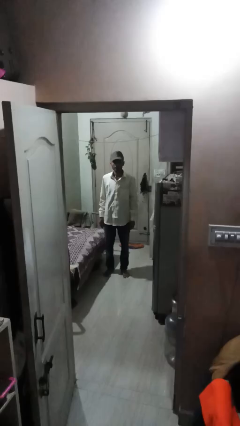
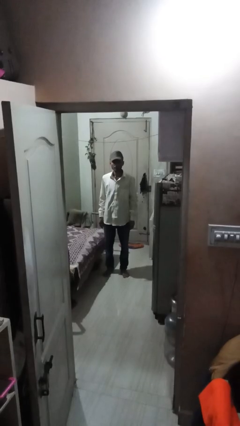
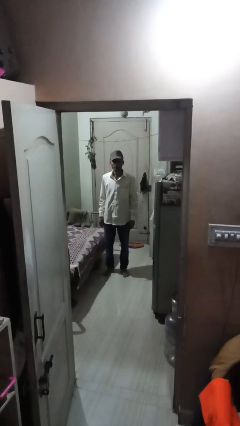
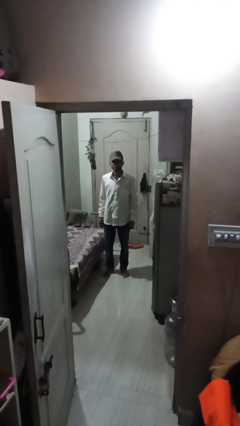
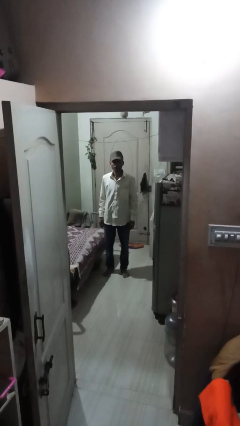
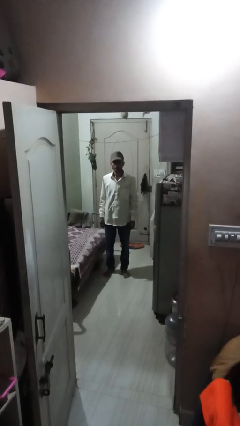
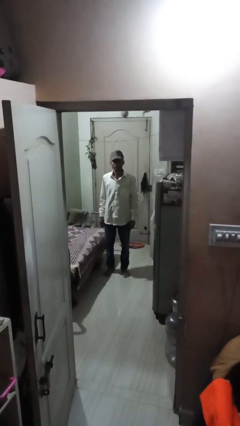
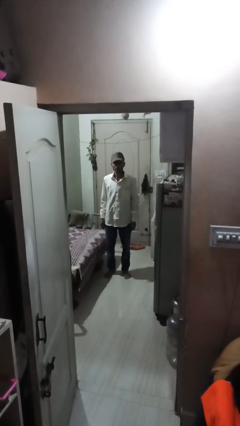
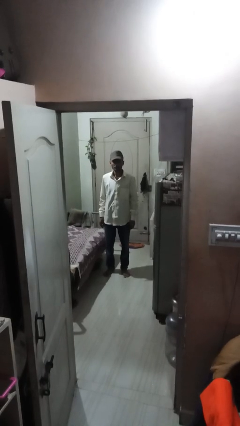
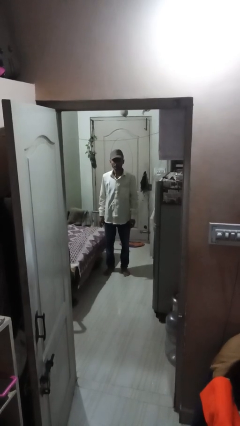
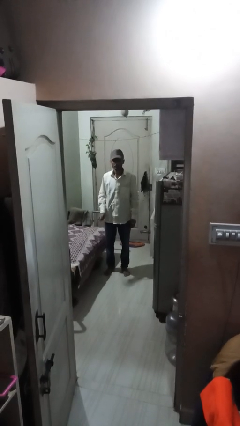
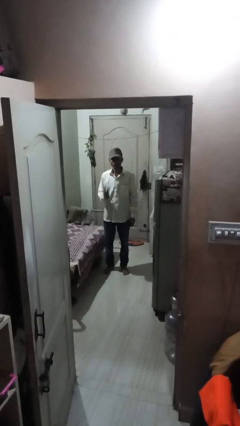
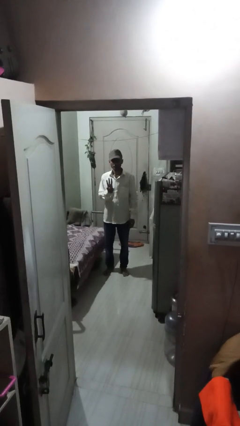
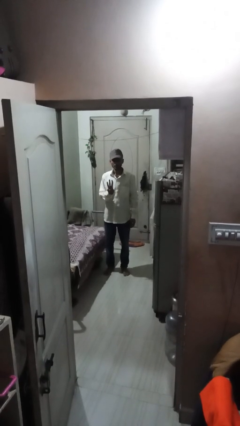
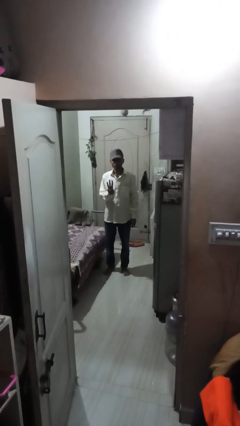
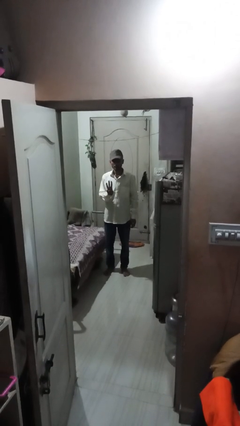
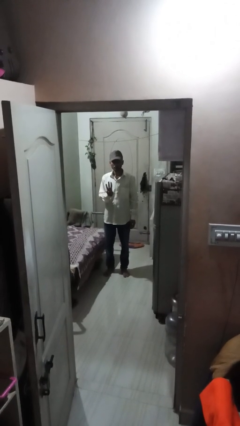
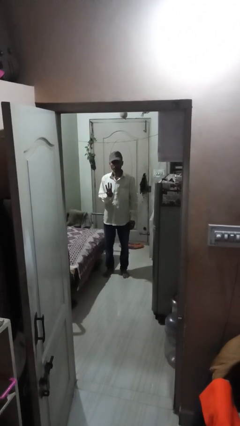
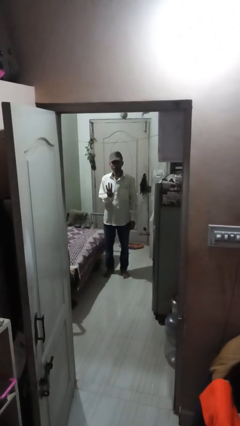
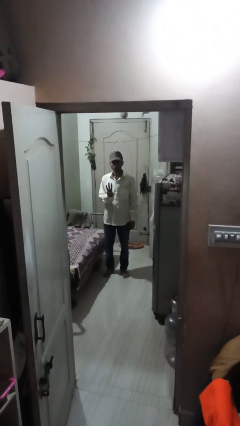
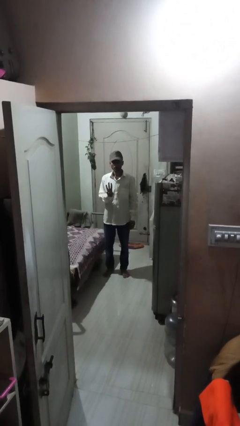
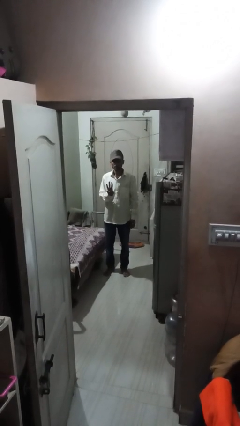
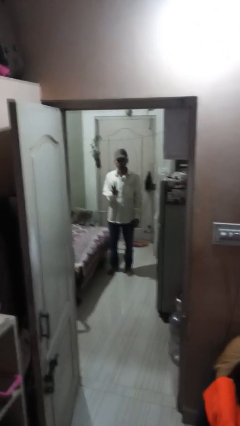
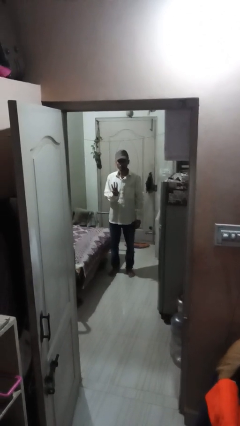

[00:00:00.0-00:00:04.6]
person gestures number three

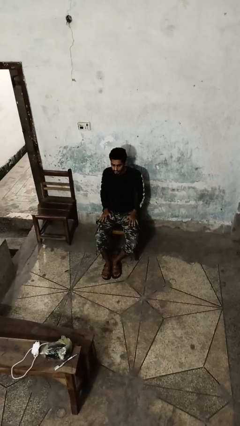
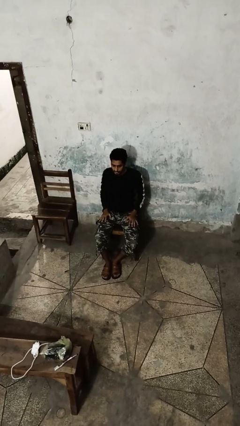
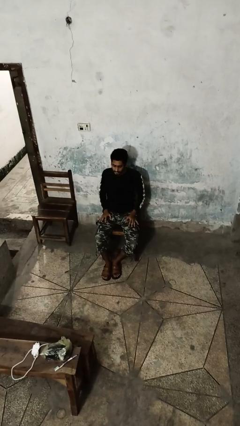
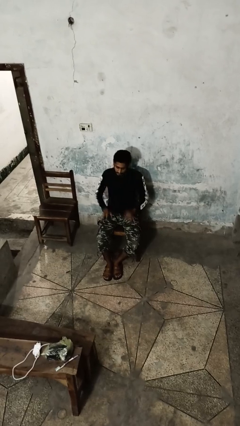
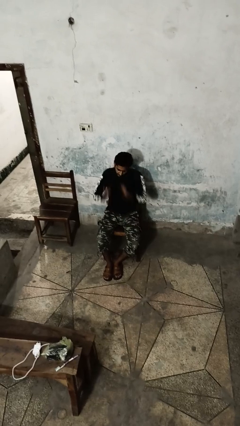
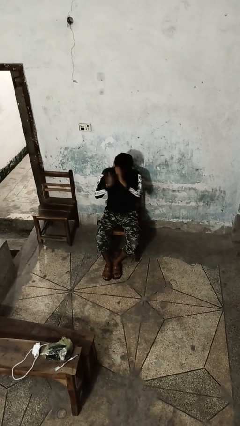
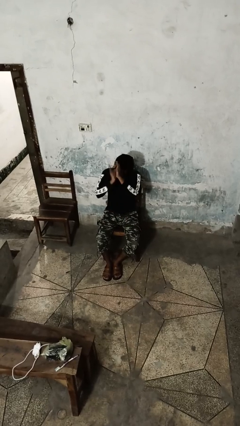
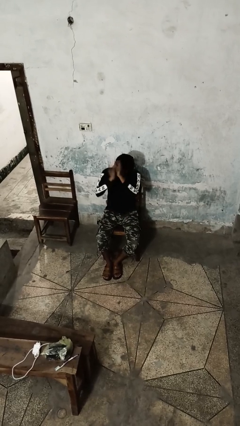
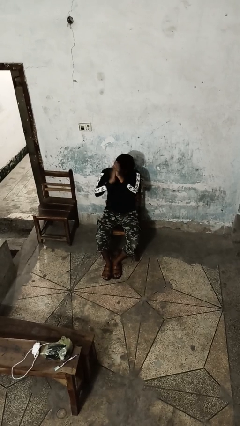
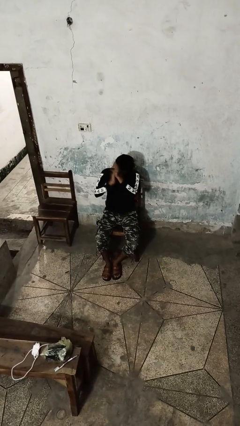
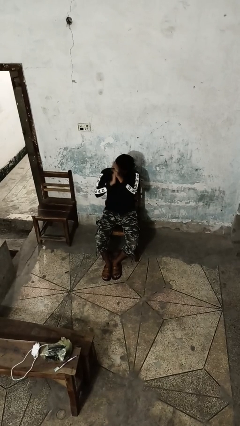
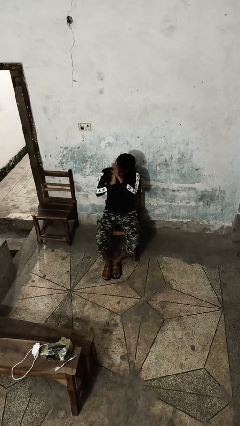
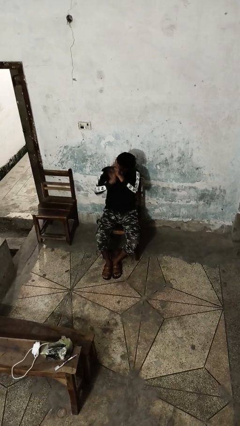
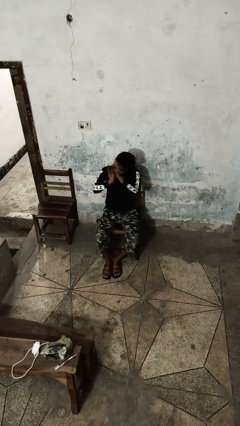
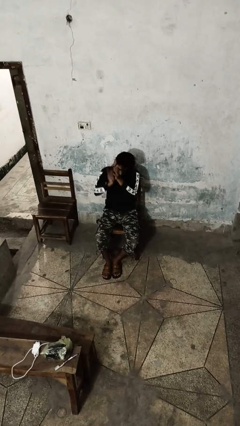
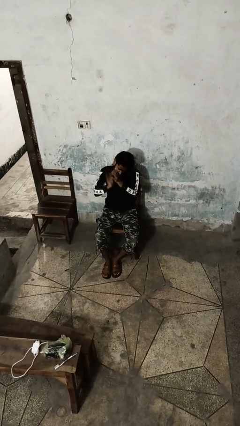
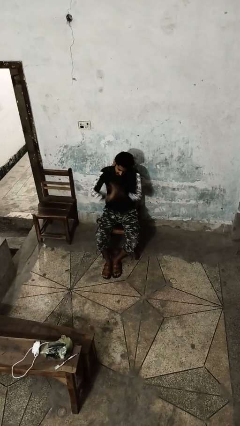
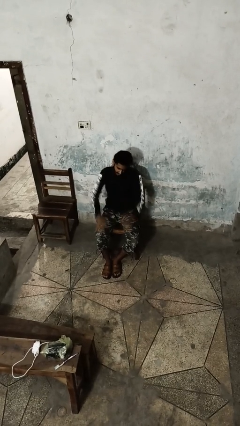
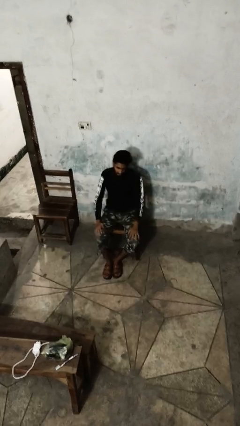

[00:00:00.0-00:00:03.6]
person claps hands

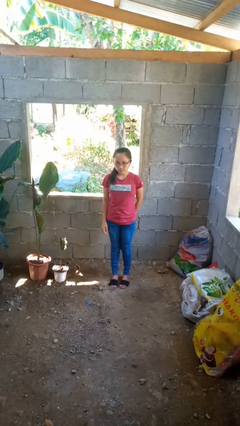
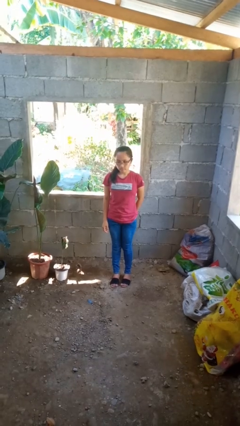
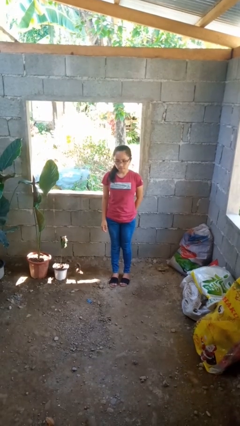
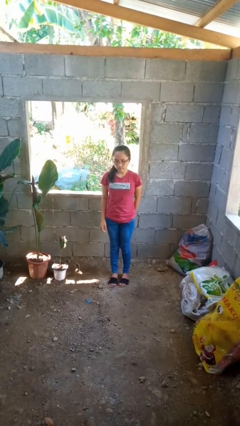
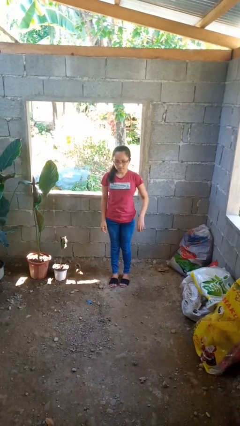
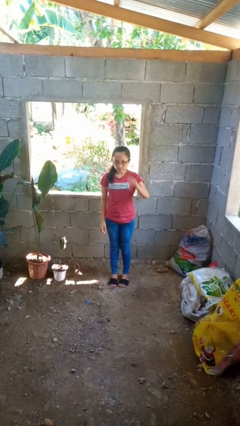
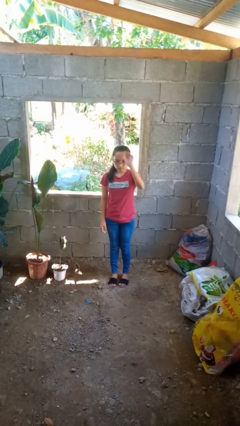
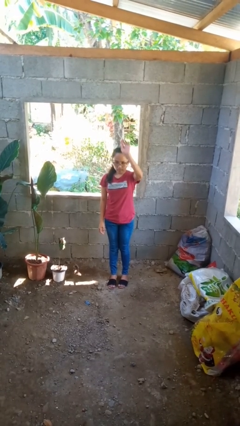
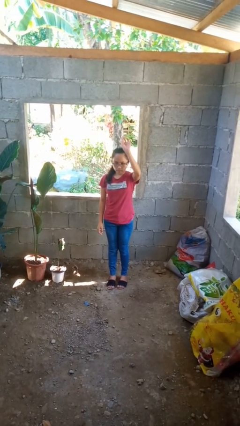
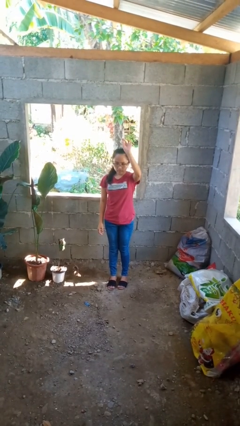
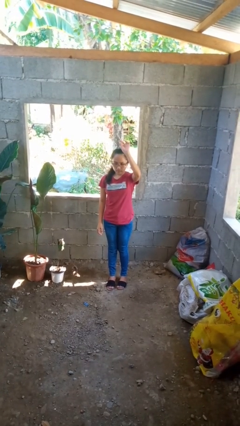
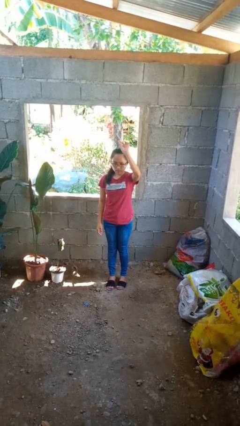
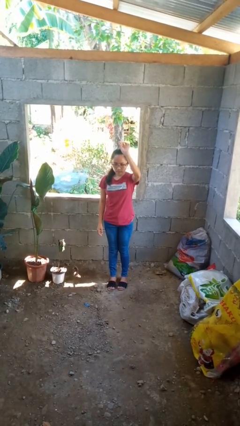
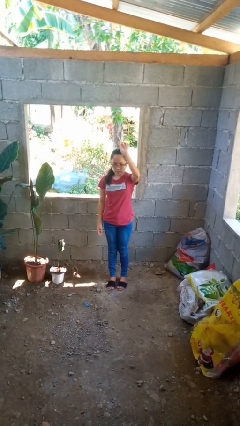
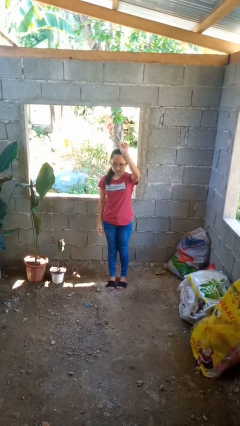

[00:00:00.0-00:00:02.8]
person gestures raise hand

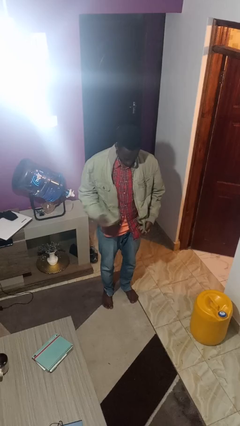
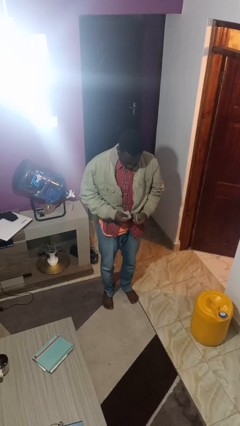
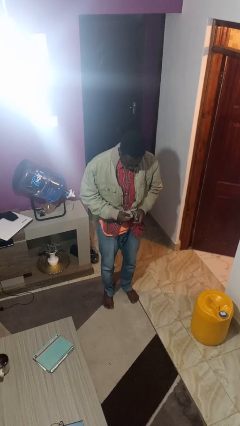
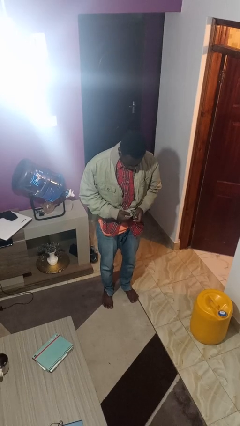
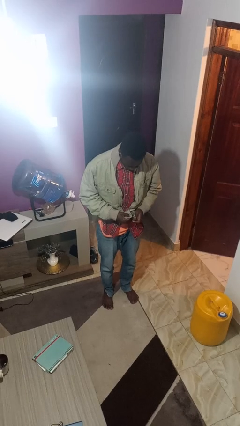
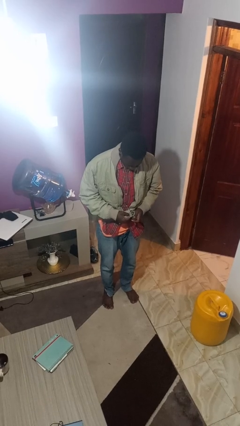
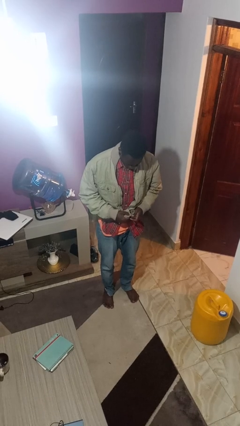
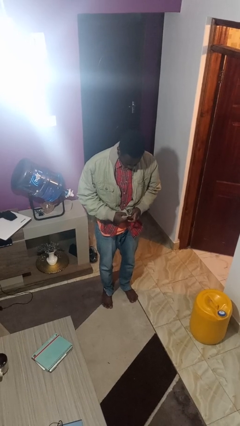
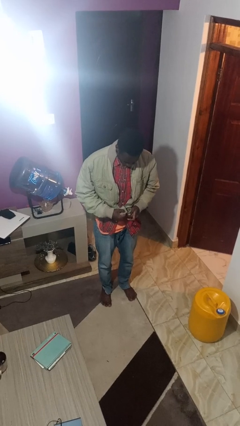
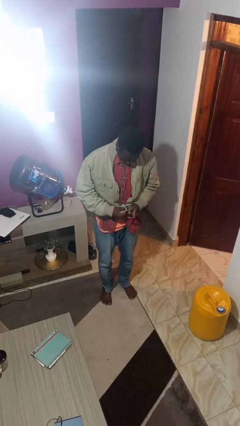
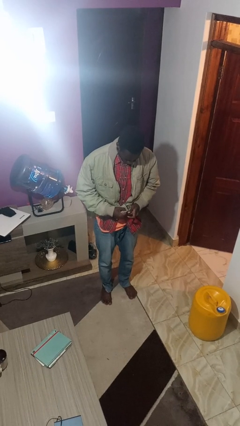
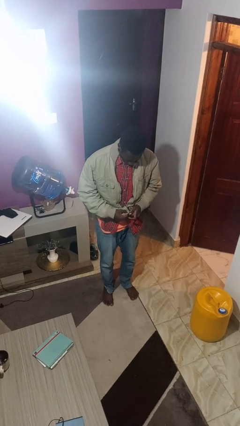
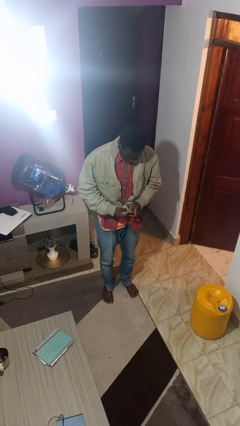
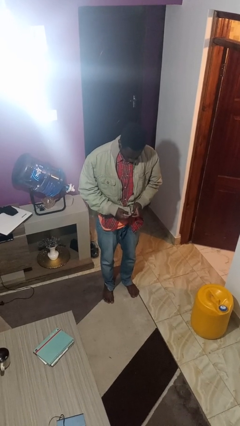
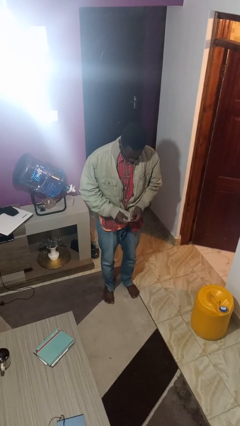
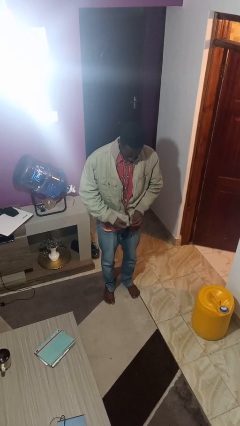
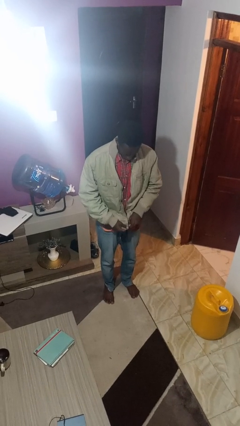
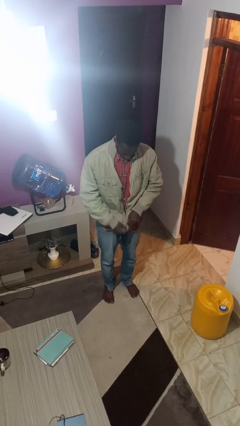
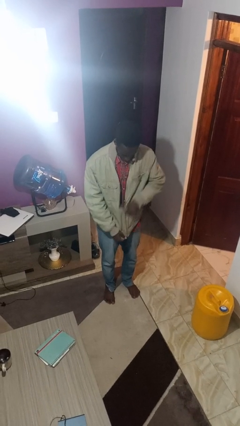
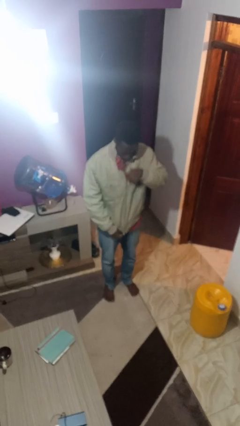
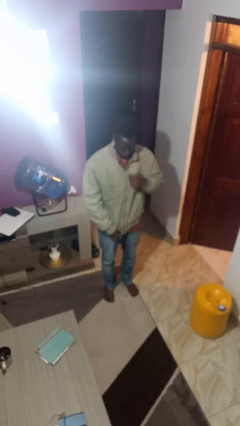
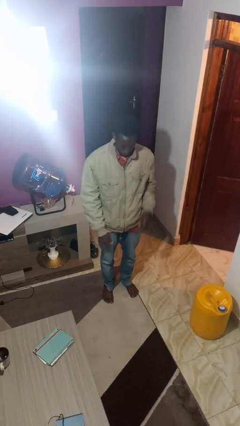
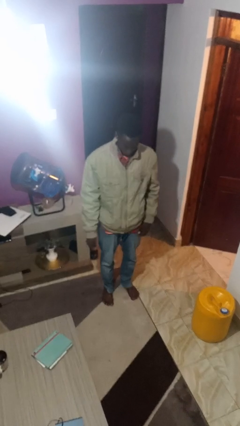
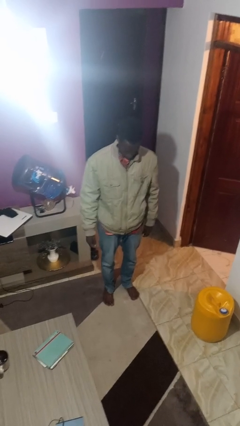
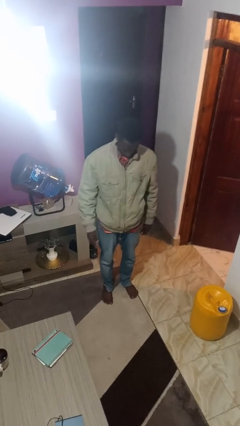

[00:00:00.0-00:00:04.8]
person zips up jacket

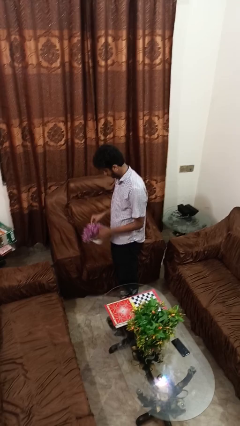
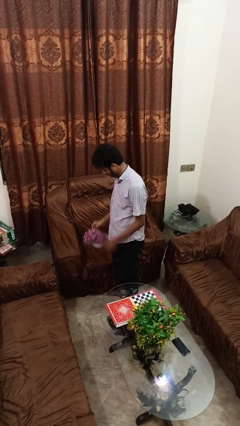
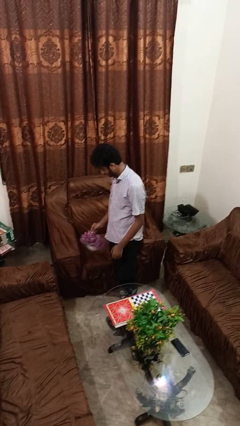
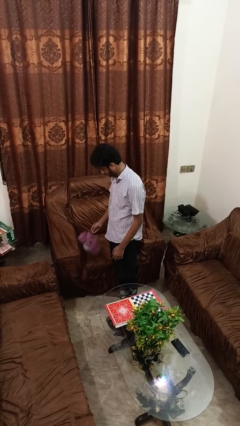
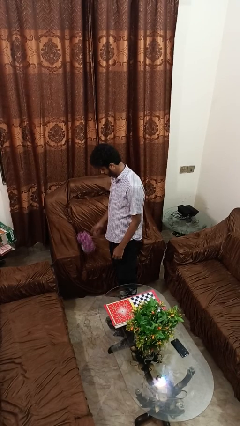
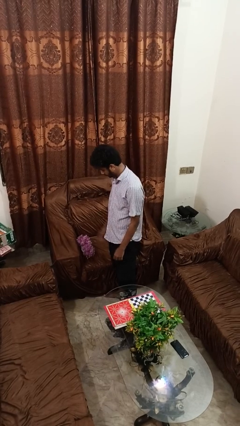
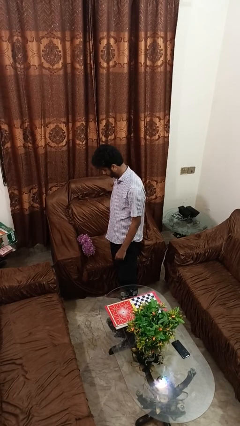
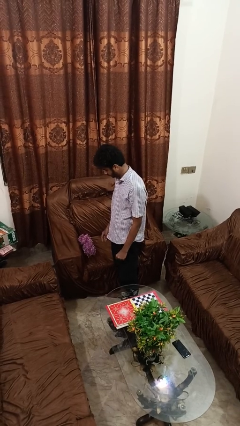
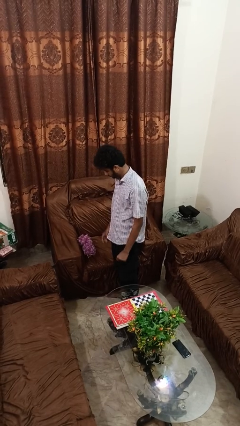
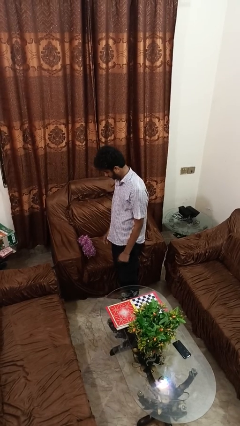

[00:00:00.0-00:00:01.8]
person puts down object on couch
